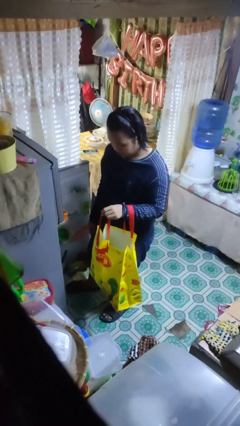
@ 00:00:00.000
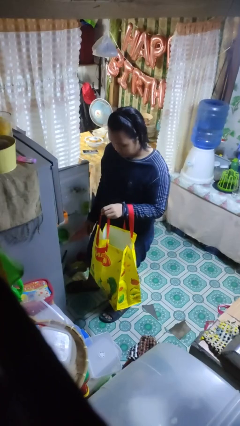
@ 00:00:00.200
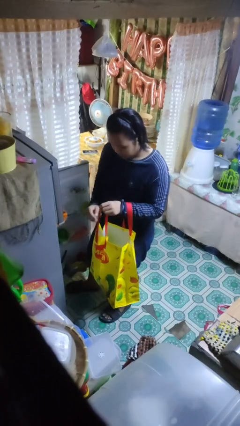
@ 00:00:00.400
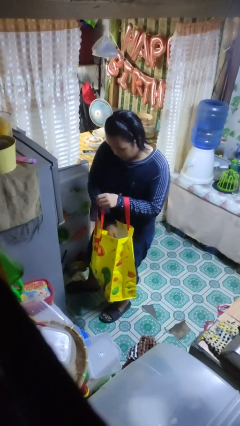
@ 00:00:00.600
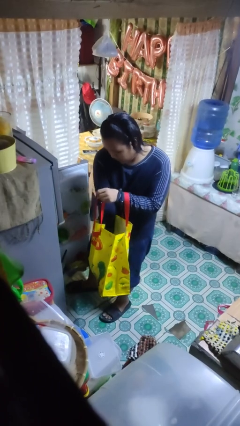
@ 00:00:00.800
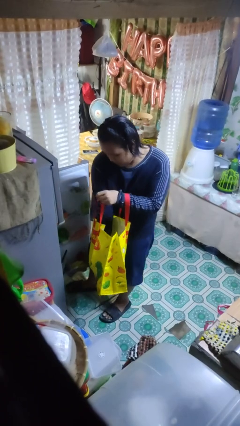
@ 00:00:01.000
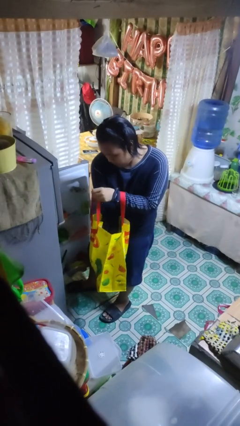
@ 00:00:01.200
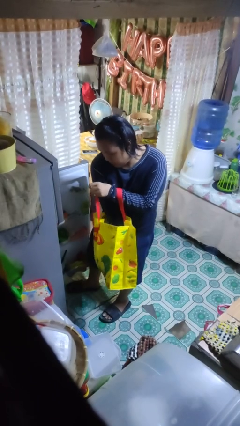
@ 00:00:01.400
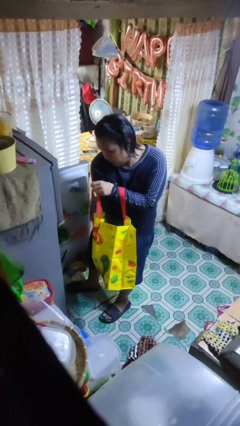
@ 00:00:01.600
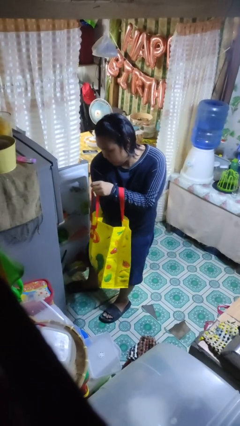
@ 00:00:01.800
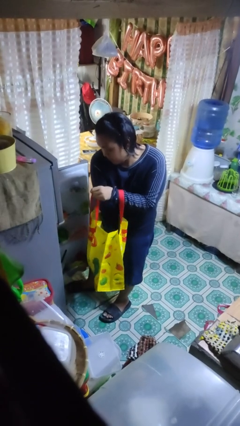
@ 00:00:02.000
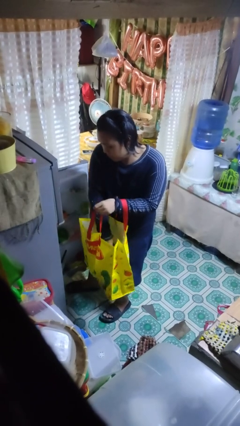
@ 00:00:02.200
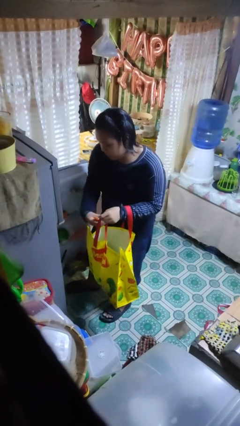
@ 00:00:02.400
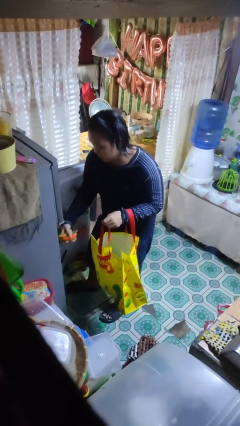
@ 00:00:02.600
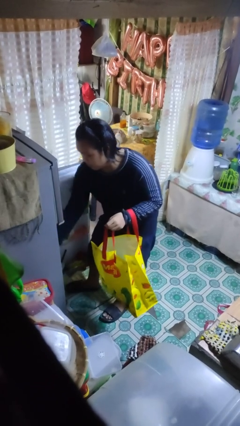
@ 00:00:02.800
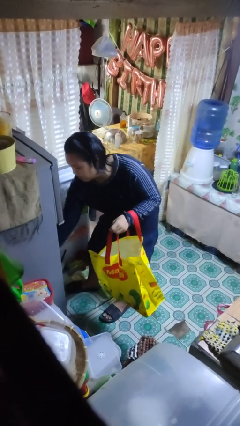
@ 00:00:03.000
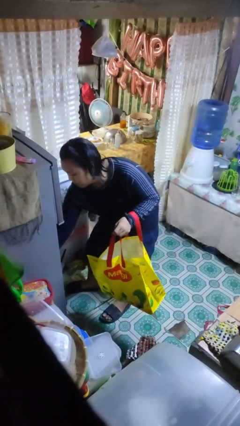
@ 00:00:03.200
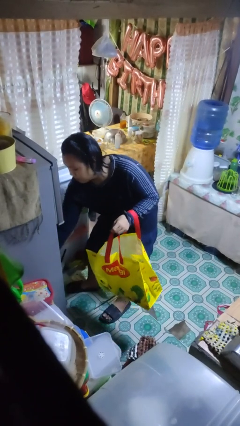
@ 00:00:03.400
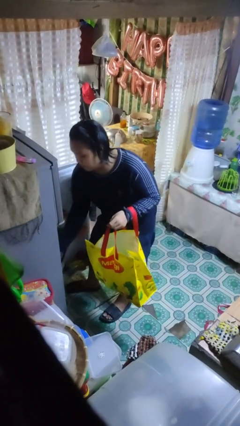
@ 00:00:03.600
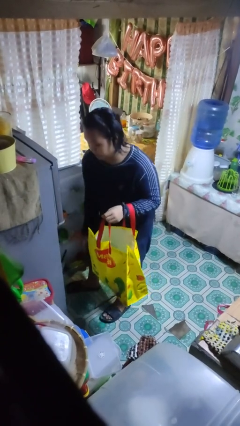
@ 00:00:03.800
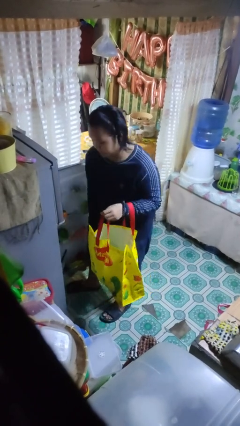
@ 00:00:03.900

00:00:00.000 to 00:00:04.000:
person loads groceries into refrigerator

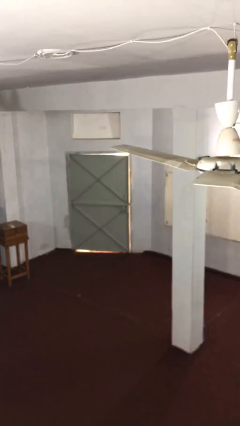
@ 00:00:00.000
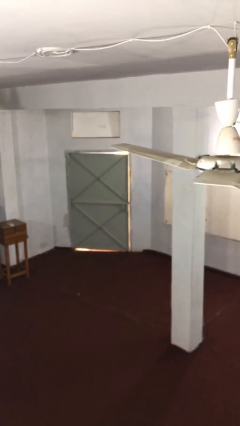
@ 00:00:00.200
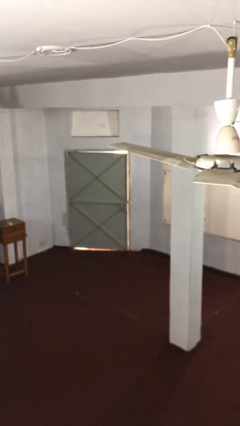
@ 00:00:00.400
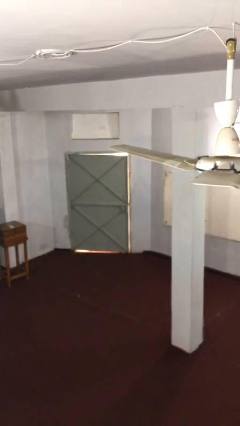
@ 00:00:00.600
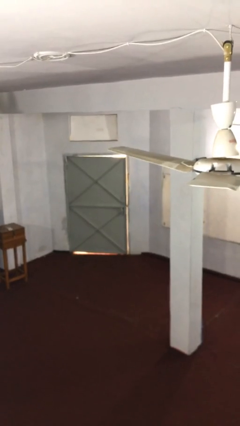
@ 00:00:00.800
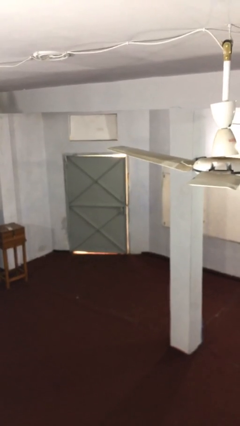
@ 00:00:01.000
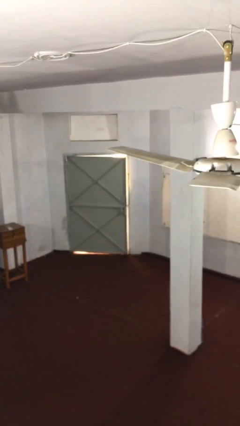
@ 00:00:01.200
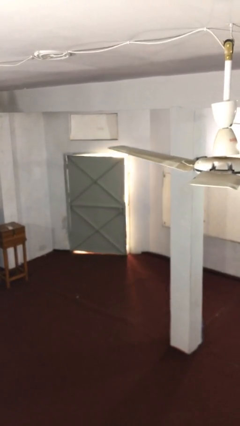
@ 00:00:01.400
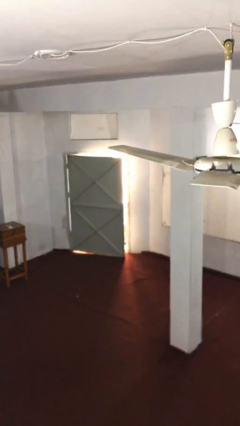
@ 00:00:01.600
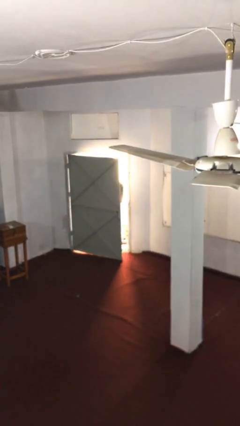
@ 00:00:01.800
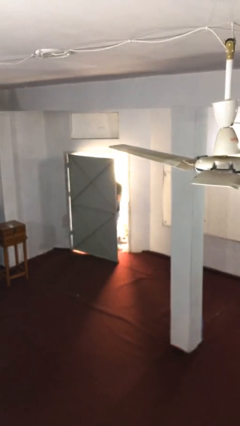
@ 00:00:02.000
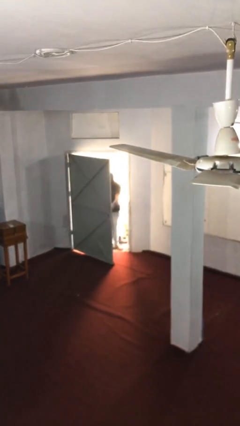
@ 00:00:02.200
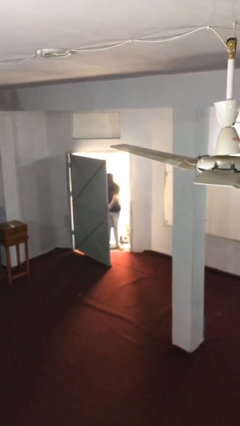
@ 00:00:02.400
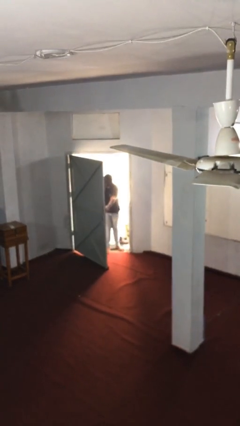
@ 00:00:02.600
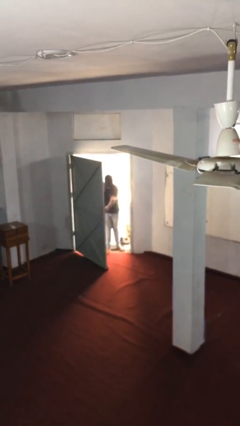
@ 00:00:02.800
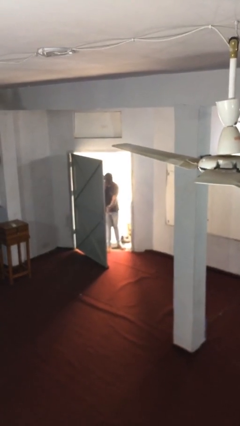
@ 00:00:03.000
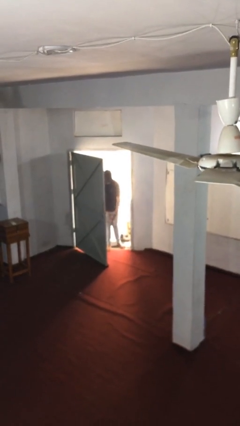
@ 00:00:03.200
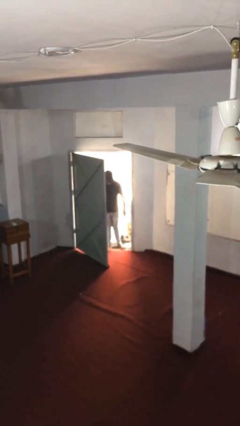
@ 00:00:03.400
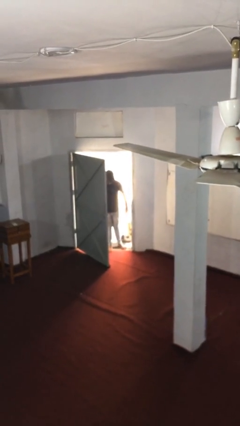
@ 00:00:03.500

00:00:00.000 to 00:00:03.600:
person opens facility door

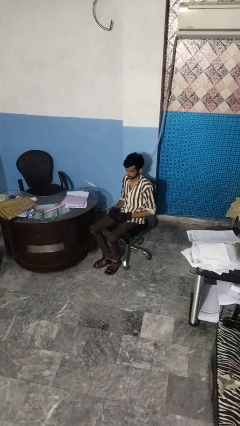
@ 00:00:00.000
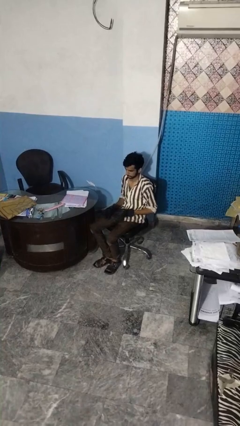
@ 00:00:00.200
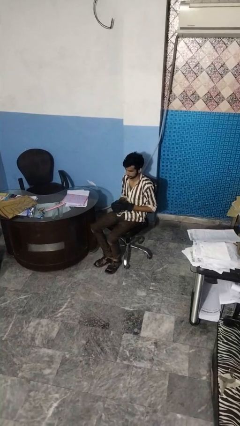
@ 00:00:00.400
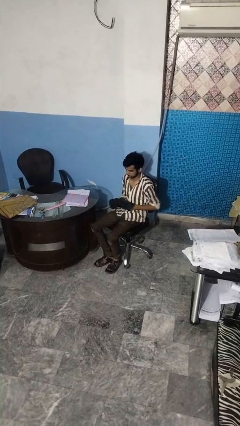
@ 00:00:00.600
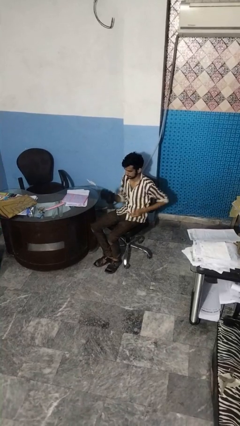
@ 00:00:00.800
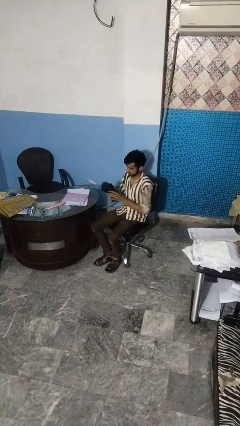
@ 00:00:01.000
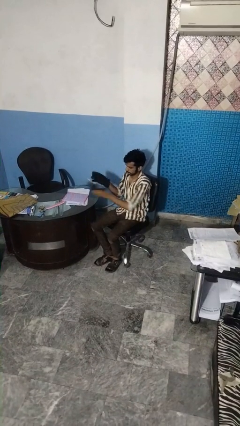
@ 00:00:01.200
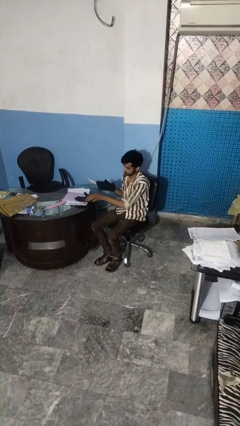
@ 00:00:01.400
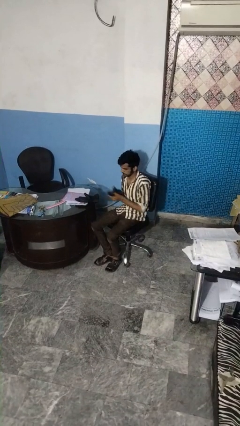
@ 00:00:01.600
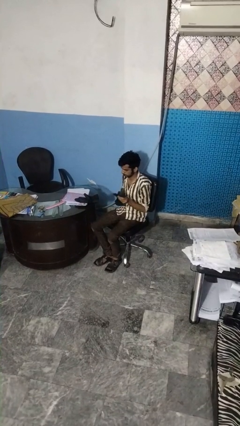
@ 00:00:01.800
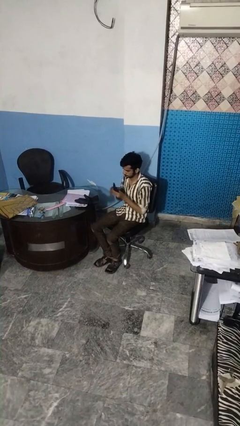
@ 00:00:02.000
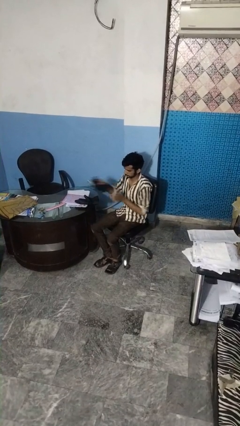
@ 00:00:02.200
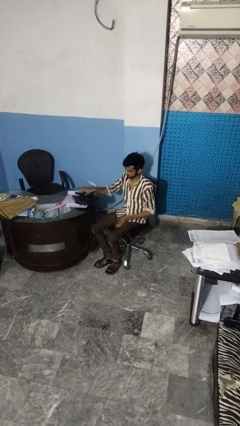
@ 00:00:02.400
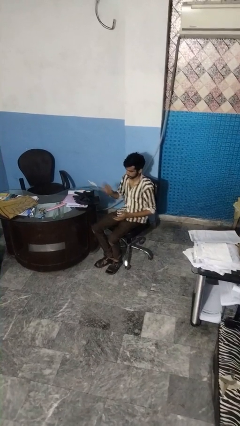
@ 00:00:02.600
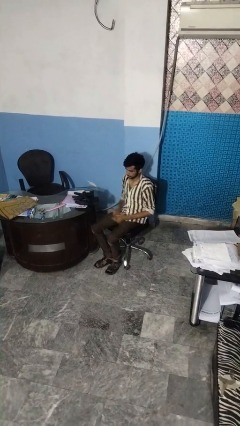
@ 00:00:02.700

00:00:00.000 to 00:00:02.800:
person takes off gloves

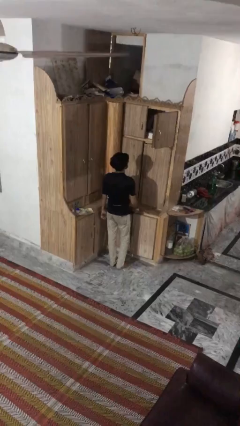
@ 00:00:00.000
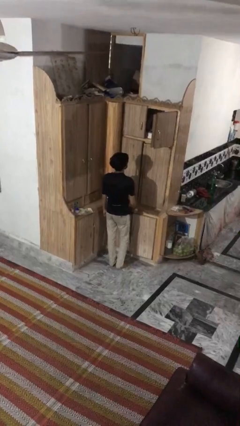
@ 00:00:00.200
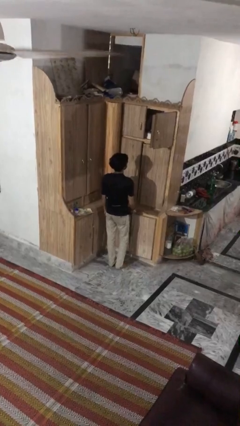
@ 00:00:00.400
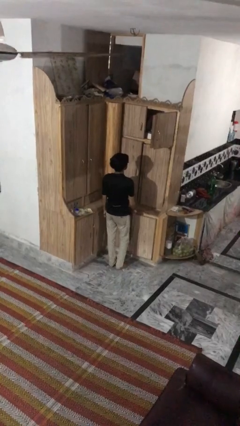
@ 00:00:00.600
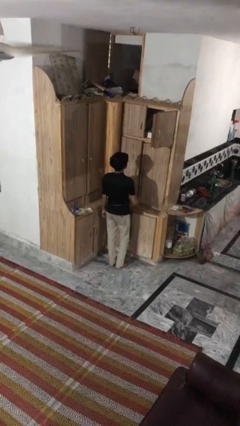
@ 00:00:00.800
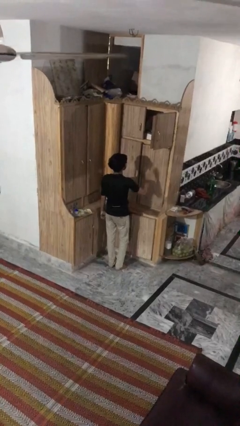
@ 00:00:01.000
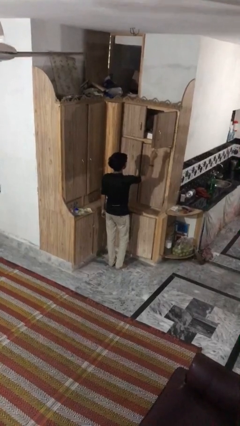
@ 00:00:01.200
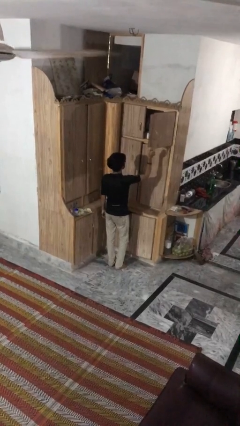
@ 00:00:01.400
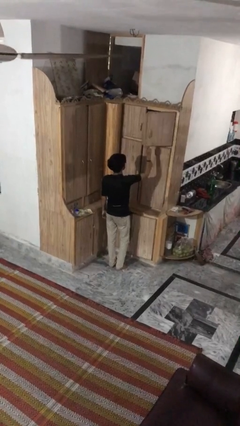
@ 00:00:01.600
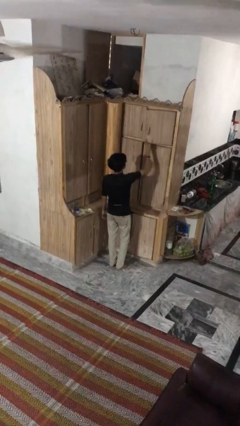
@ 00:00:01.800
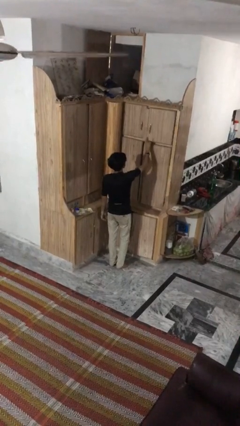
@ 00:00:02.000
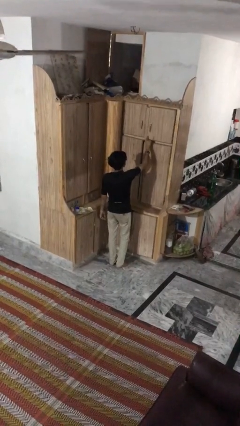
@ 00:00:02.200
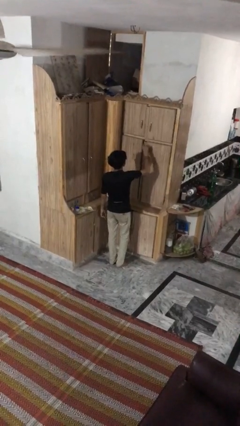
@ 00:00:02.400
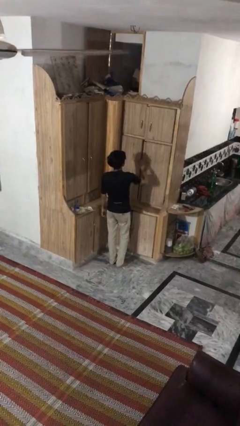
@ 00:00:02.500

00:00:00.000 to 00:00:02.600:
person closes cabinet

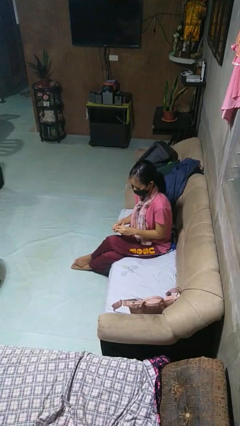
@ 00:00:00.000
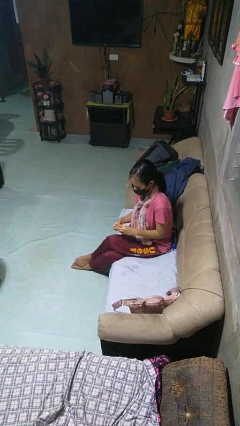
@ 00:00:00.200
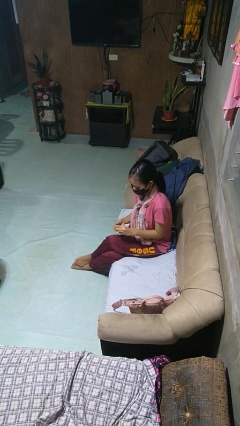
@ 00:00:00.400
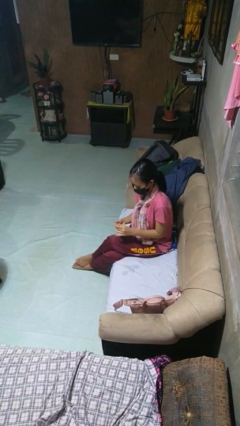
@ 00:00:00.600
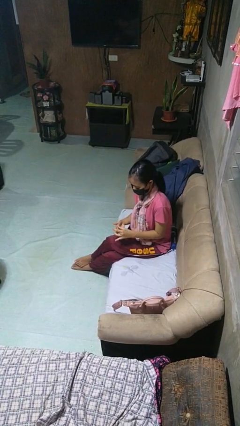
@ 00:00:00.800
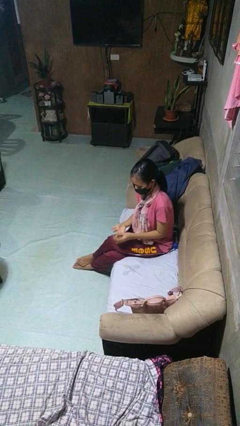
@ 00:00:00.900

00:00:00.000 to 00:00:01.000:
person puts on ring

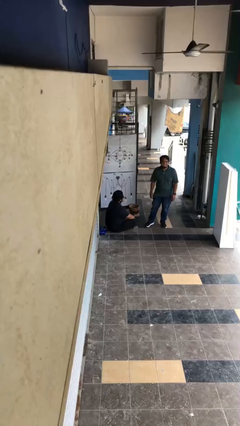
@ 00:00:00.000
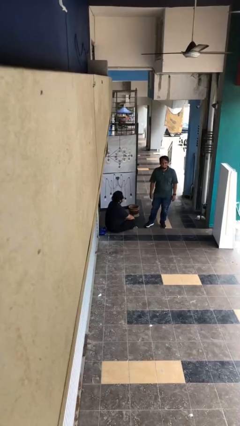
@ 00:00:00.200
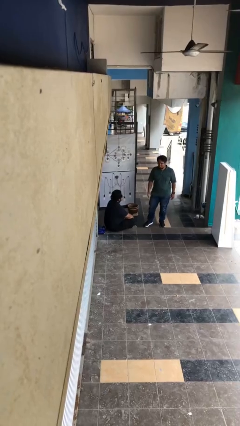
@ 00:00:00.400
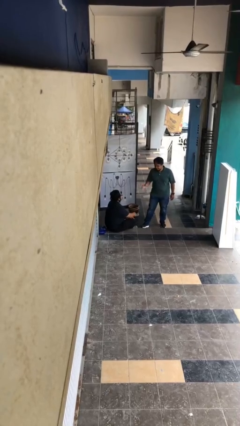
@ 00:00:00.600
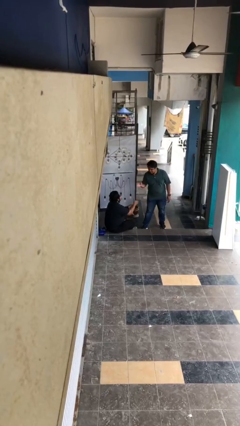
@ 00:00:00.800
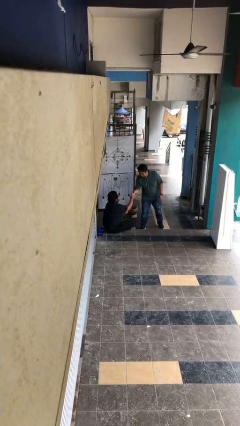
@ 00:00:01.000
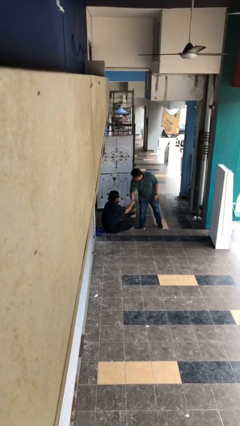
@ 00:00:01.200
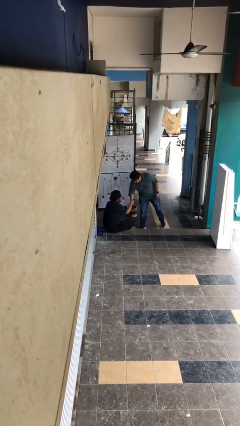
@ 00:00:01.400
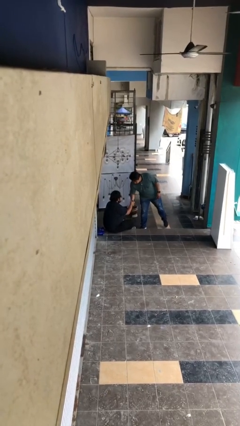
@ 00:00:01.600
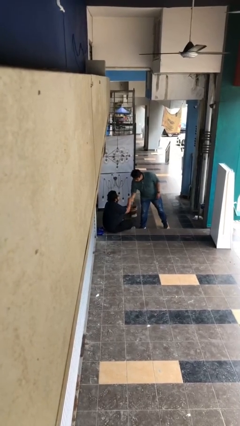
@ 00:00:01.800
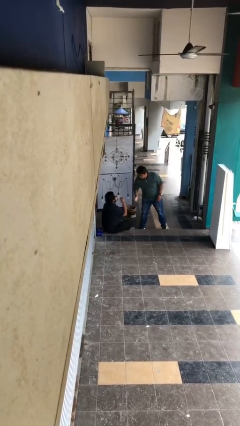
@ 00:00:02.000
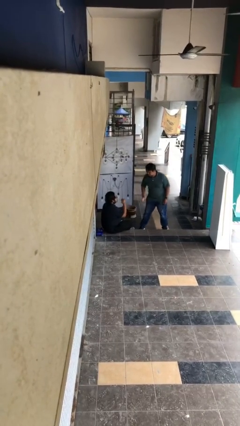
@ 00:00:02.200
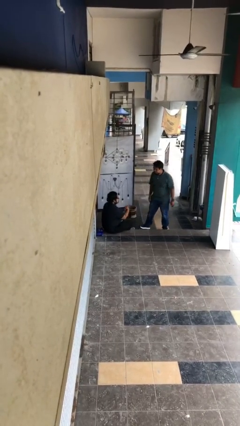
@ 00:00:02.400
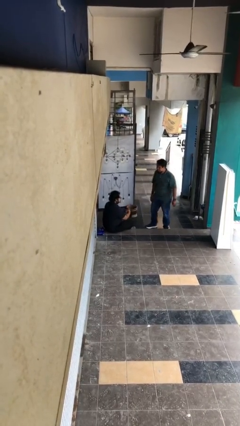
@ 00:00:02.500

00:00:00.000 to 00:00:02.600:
person shakes hand

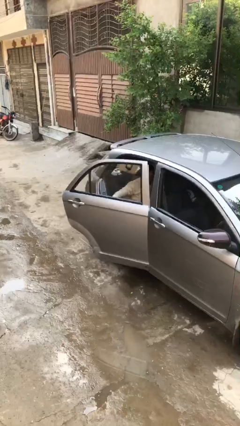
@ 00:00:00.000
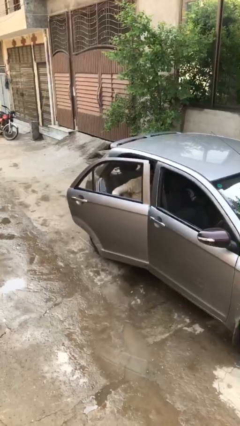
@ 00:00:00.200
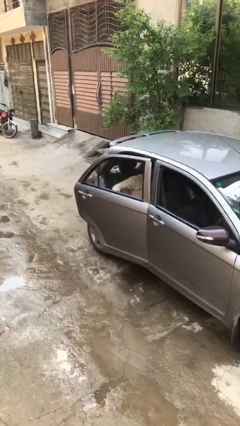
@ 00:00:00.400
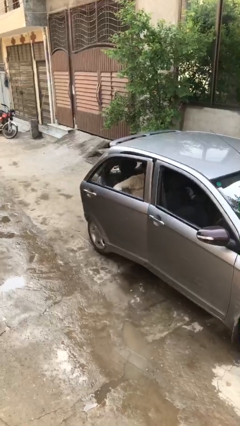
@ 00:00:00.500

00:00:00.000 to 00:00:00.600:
person closes car door
